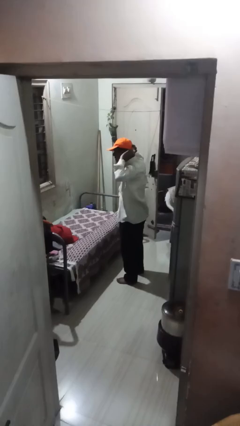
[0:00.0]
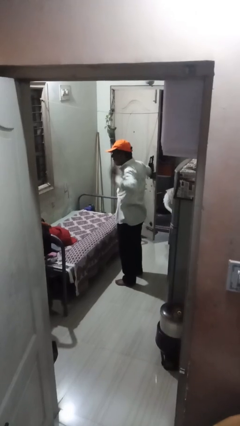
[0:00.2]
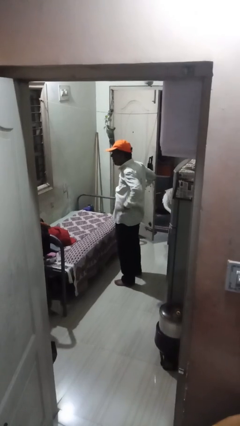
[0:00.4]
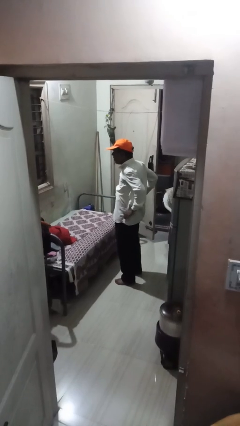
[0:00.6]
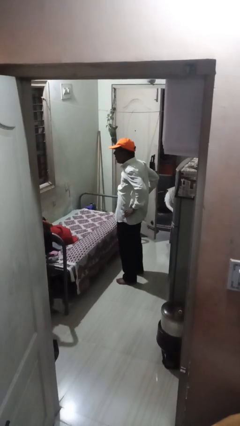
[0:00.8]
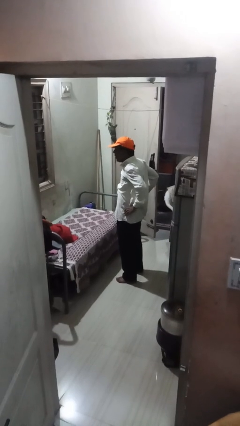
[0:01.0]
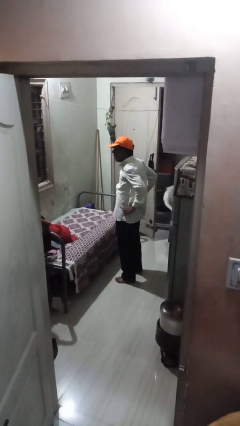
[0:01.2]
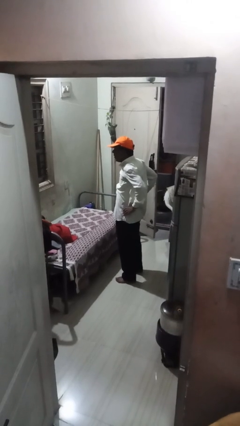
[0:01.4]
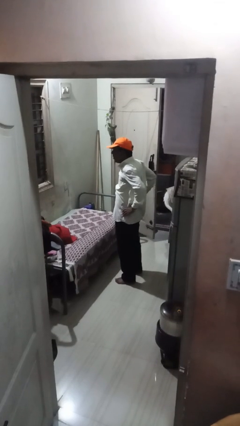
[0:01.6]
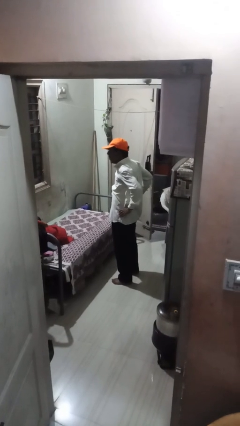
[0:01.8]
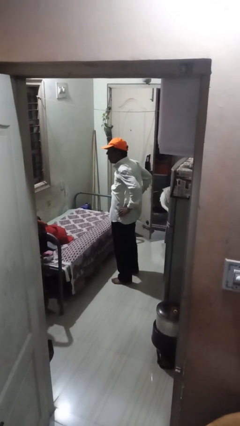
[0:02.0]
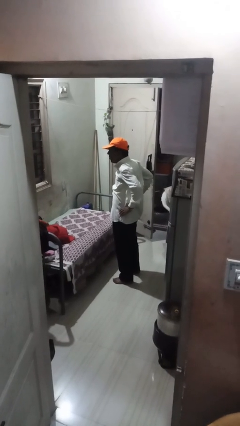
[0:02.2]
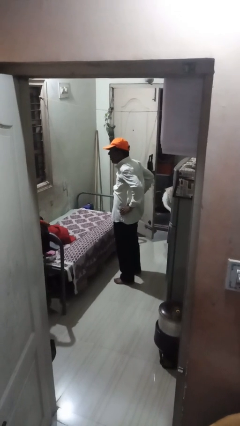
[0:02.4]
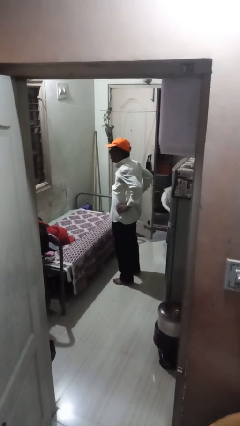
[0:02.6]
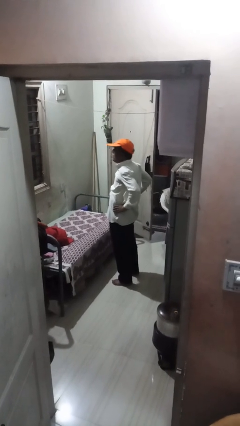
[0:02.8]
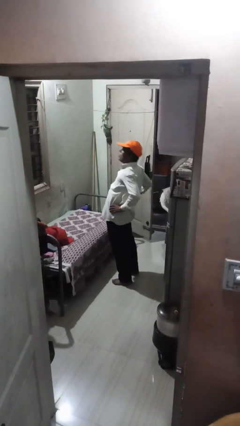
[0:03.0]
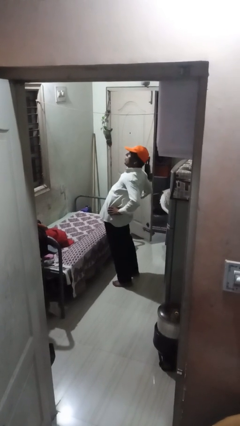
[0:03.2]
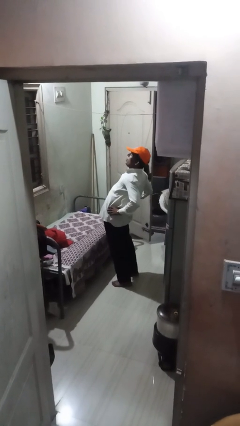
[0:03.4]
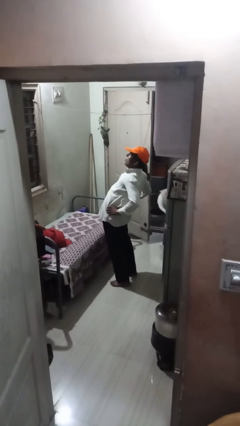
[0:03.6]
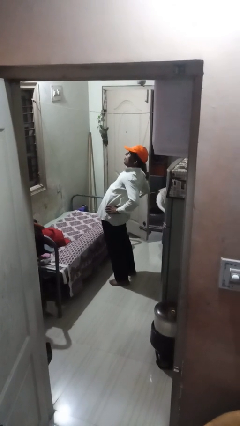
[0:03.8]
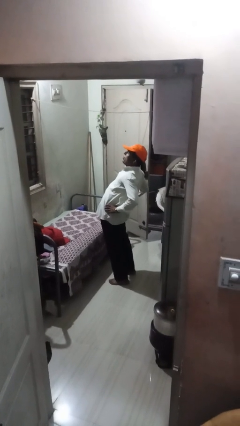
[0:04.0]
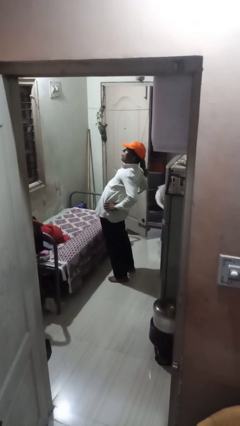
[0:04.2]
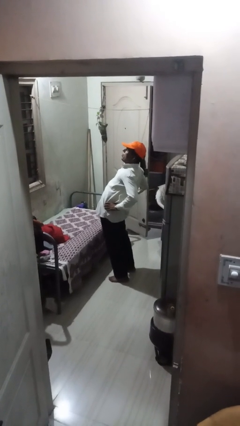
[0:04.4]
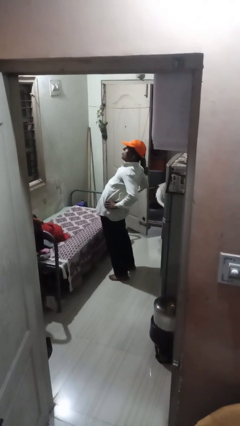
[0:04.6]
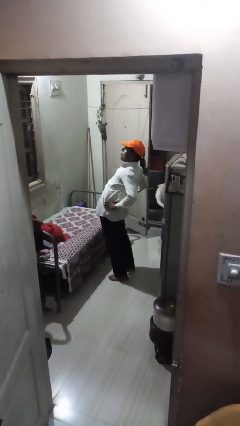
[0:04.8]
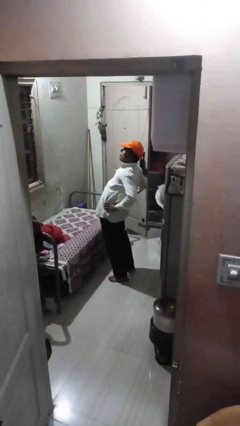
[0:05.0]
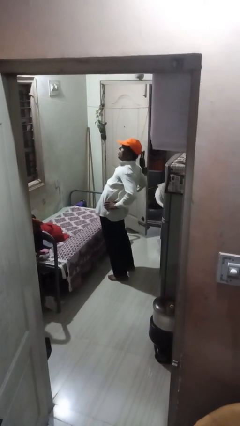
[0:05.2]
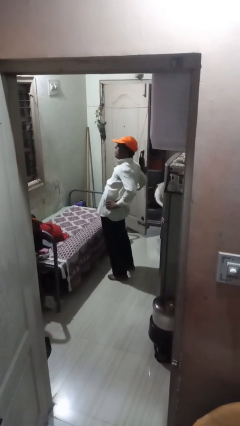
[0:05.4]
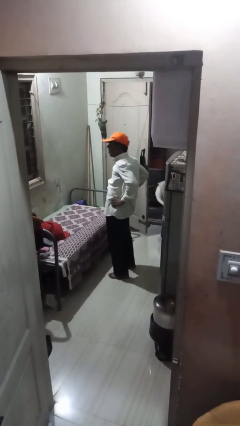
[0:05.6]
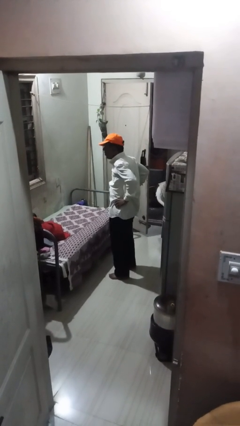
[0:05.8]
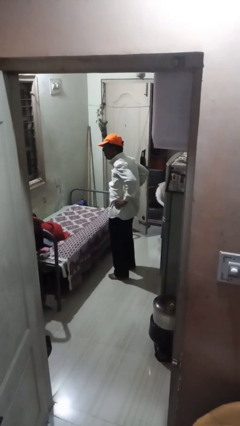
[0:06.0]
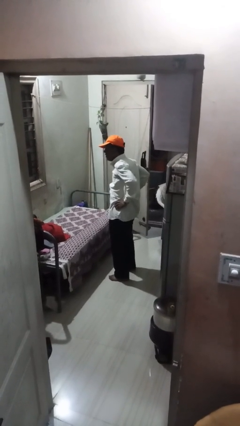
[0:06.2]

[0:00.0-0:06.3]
person stretches back

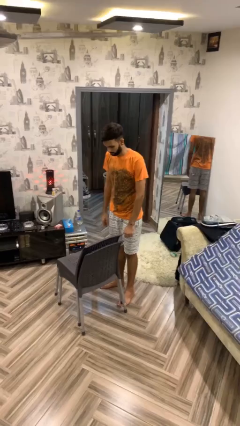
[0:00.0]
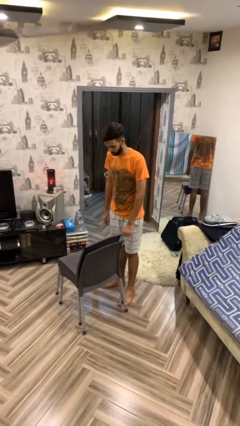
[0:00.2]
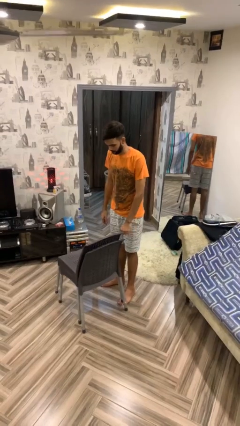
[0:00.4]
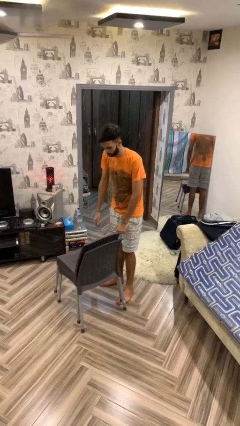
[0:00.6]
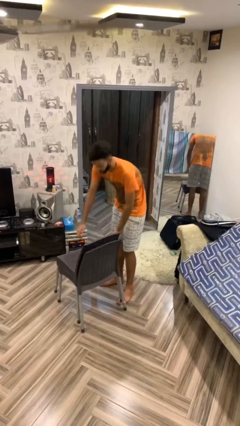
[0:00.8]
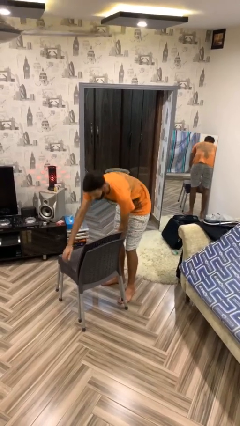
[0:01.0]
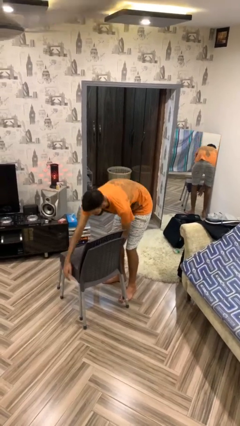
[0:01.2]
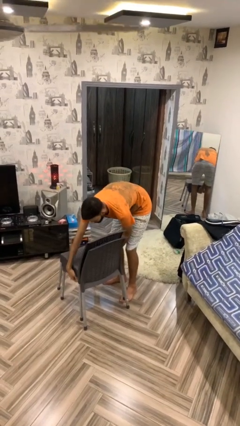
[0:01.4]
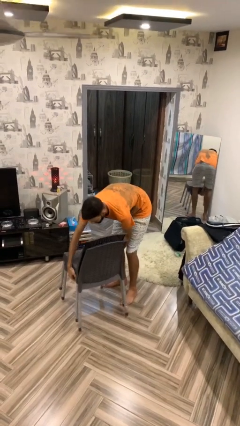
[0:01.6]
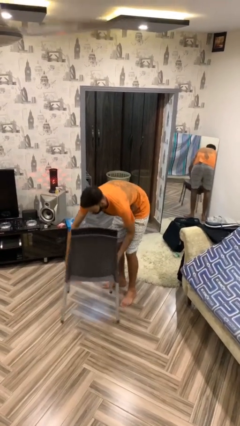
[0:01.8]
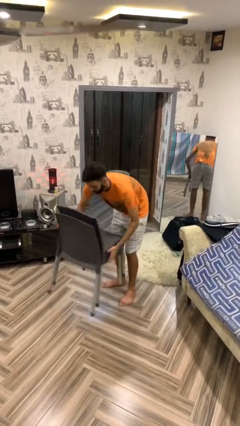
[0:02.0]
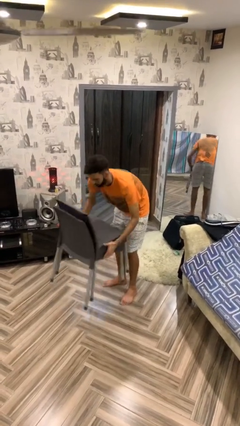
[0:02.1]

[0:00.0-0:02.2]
person picks up object from floor

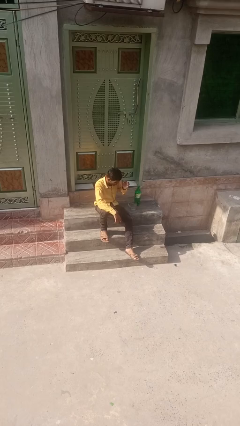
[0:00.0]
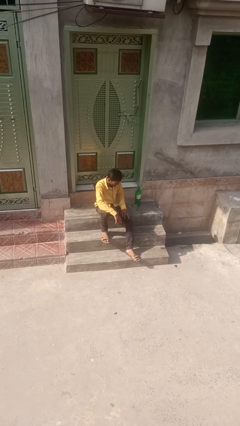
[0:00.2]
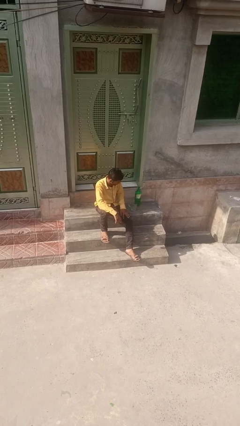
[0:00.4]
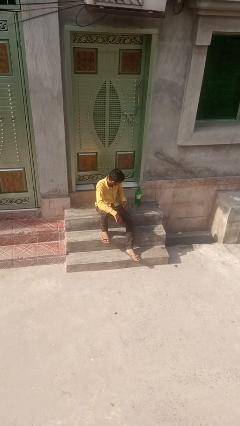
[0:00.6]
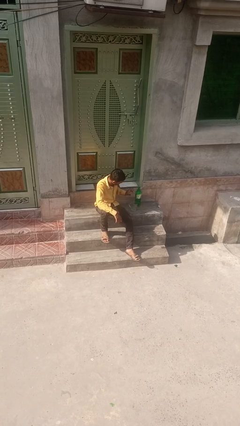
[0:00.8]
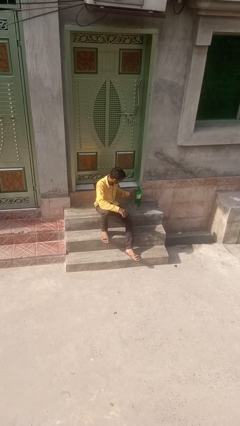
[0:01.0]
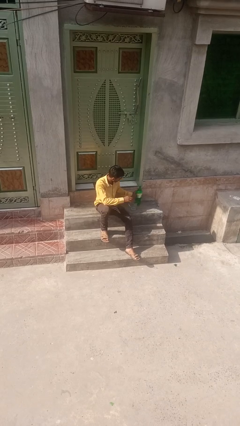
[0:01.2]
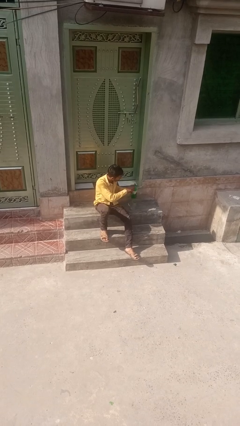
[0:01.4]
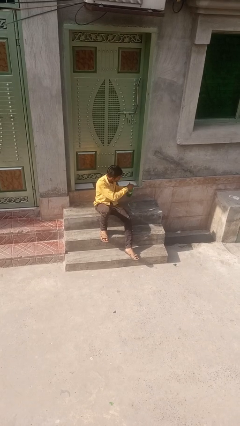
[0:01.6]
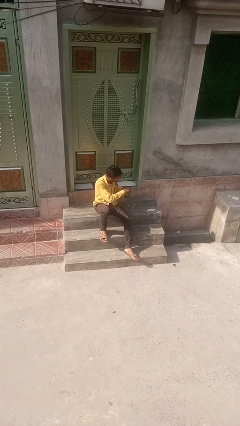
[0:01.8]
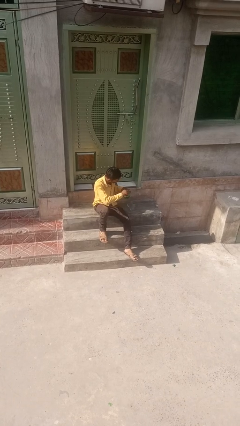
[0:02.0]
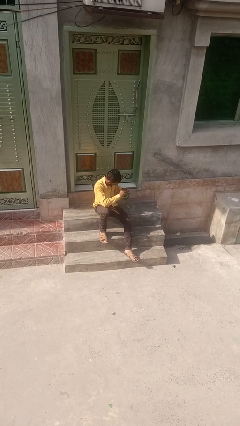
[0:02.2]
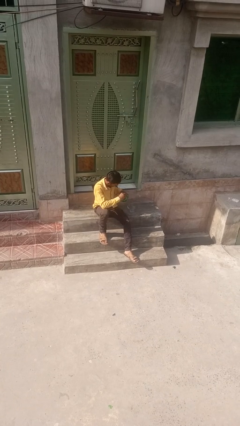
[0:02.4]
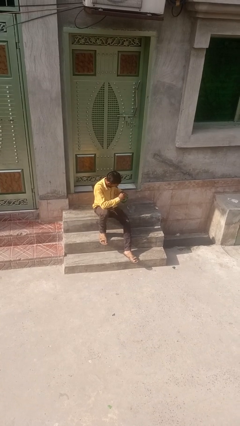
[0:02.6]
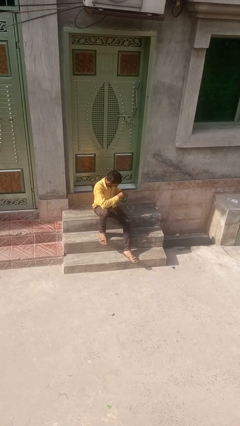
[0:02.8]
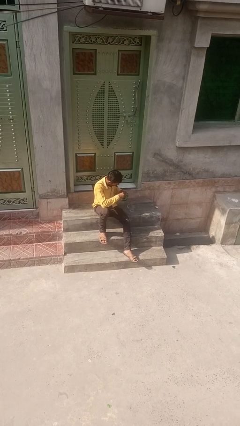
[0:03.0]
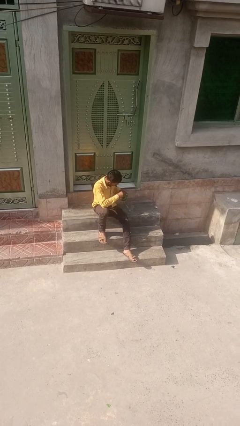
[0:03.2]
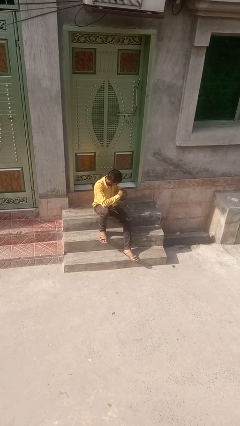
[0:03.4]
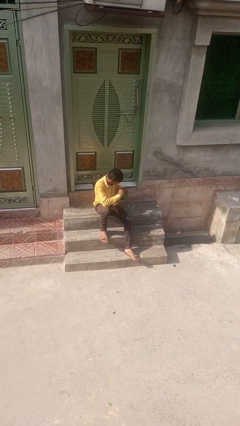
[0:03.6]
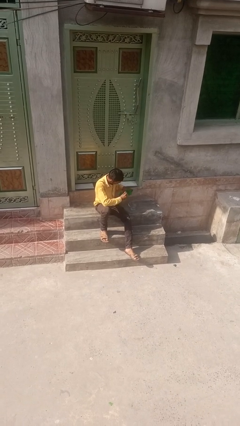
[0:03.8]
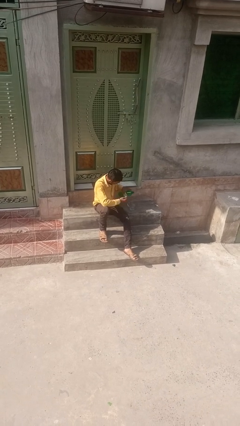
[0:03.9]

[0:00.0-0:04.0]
person unscrews lid from bottle

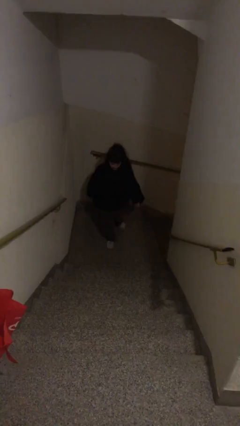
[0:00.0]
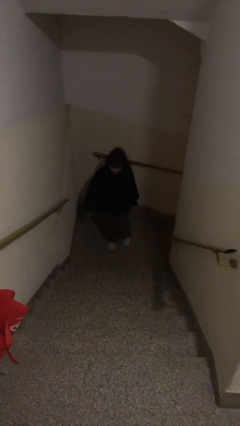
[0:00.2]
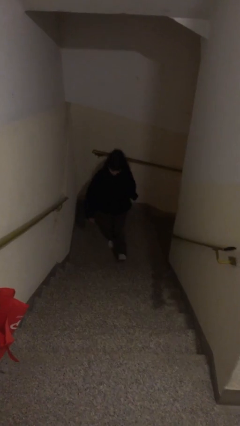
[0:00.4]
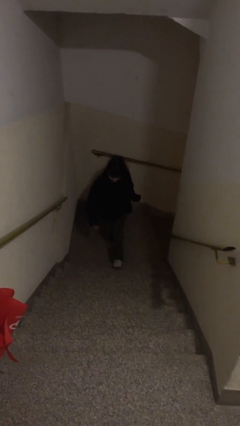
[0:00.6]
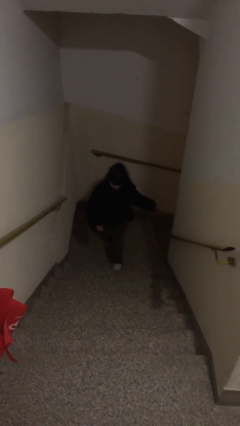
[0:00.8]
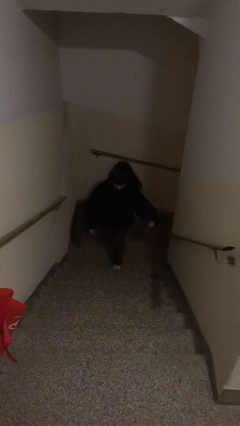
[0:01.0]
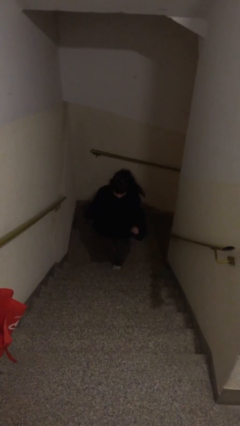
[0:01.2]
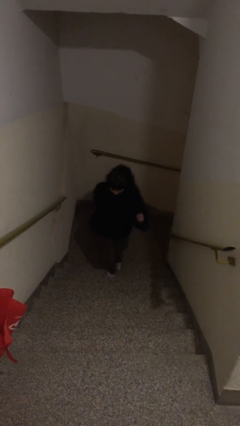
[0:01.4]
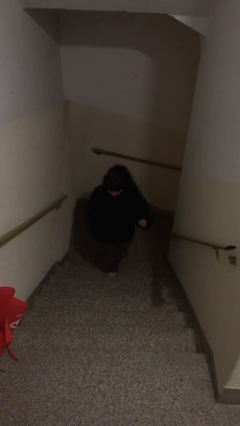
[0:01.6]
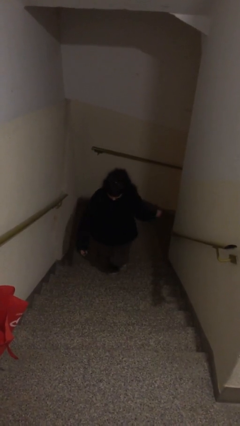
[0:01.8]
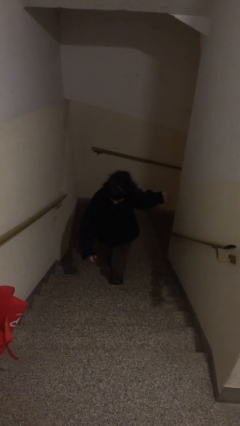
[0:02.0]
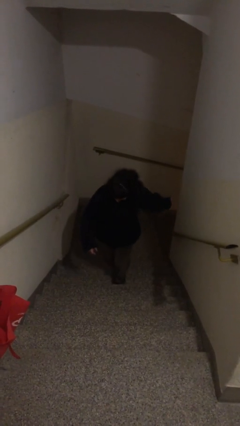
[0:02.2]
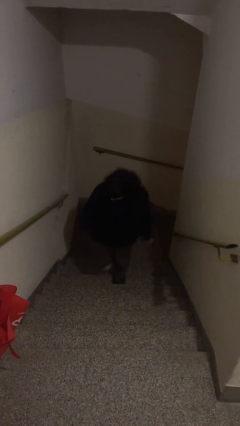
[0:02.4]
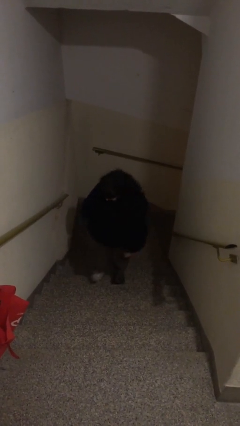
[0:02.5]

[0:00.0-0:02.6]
person climbs up stairs

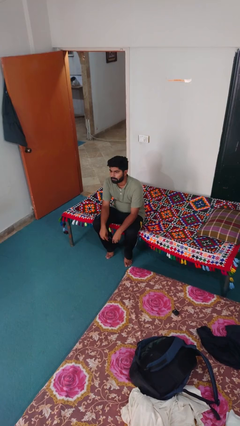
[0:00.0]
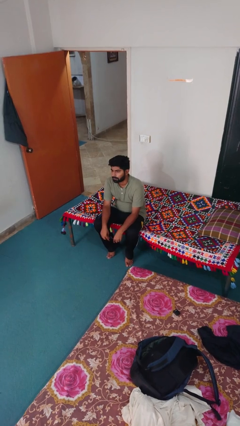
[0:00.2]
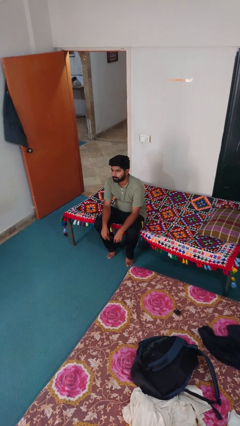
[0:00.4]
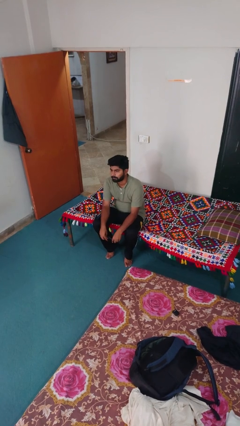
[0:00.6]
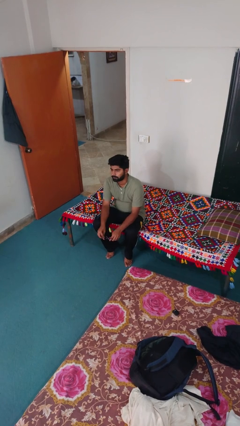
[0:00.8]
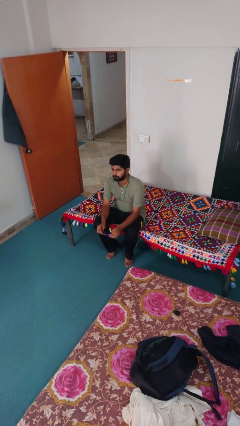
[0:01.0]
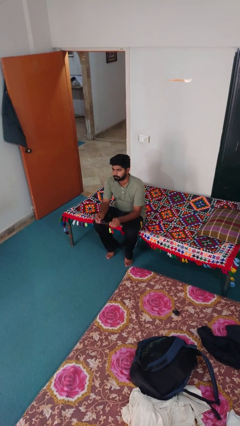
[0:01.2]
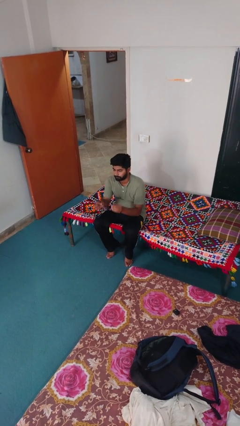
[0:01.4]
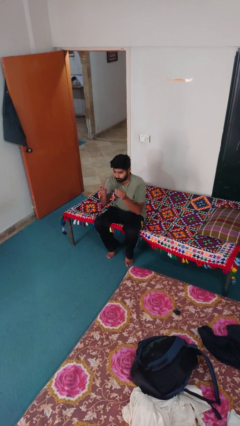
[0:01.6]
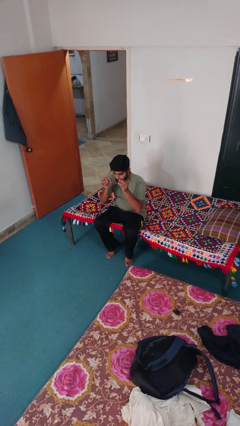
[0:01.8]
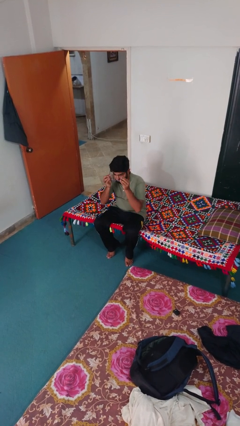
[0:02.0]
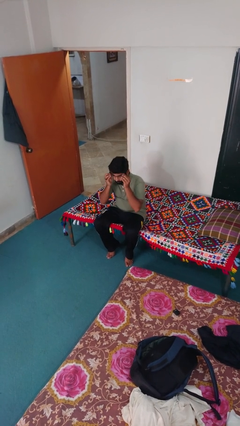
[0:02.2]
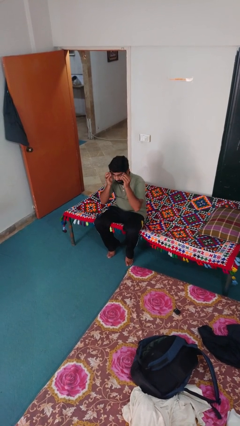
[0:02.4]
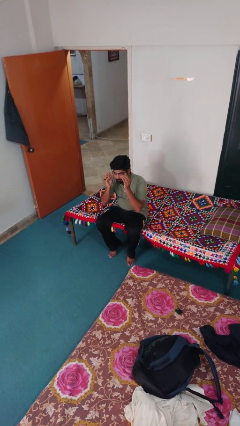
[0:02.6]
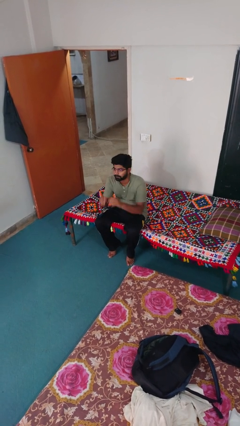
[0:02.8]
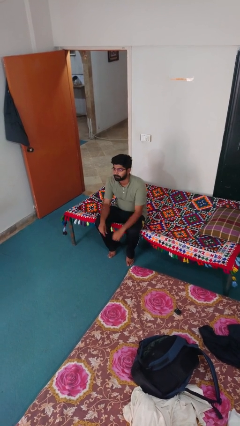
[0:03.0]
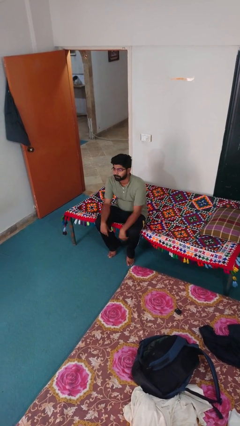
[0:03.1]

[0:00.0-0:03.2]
person puts on glasses
